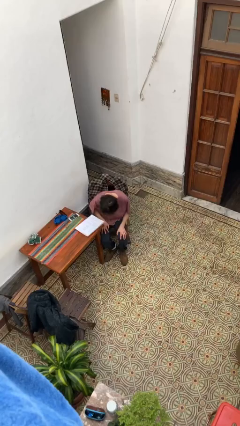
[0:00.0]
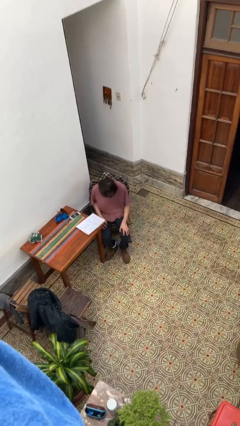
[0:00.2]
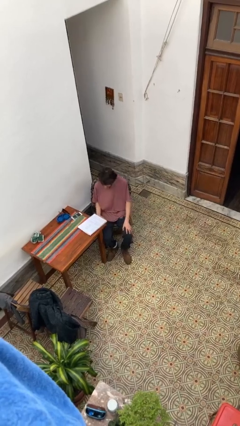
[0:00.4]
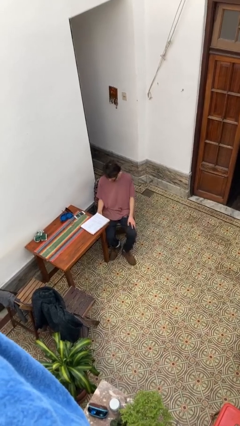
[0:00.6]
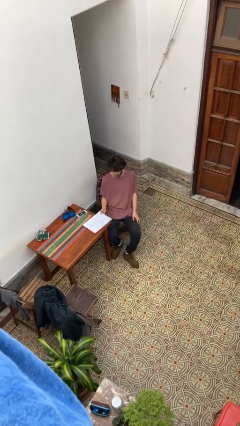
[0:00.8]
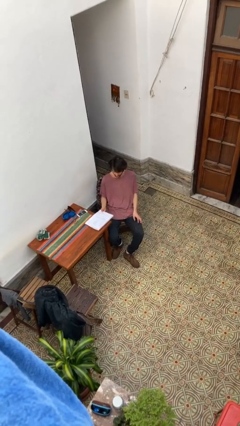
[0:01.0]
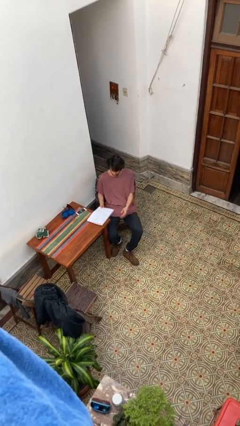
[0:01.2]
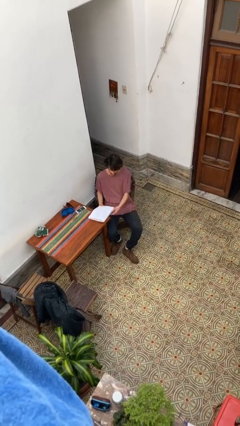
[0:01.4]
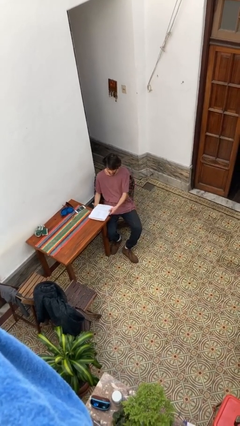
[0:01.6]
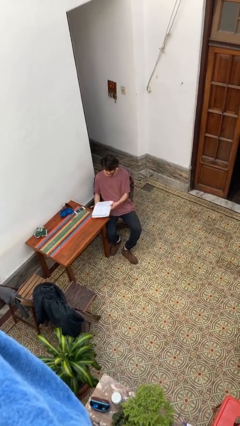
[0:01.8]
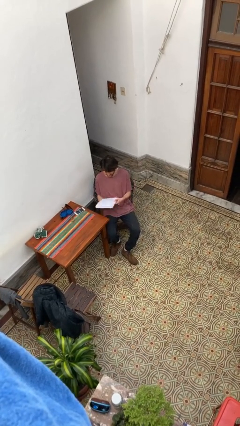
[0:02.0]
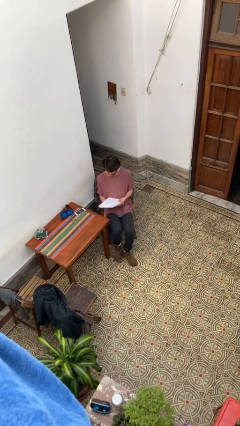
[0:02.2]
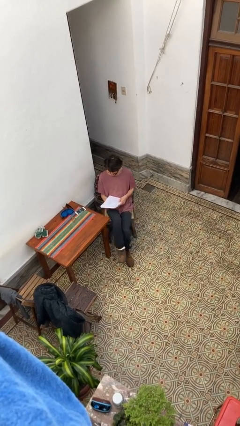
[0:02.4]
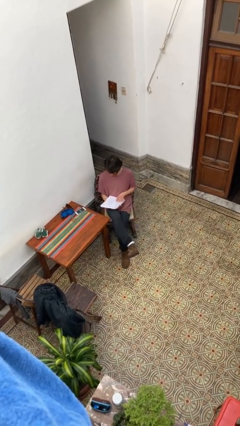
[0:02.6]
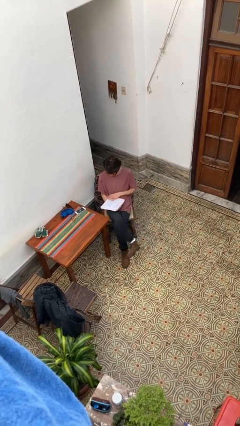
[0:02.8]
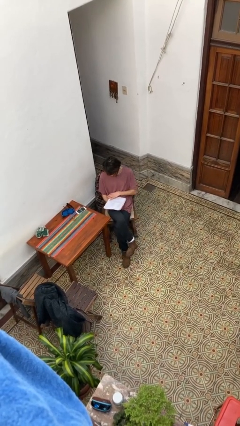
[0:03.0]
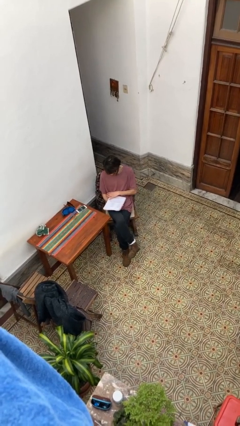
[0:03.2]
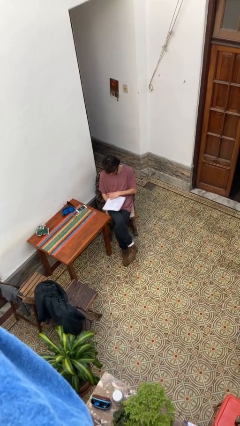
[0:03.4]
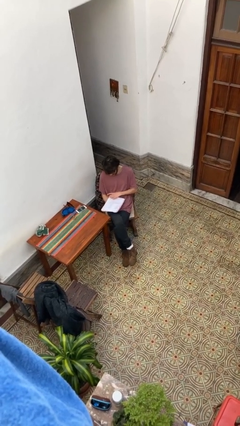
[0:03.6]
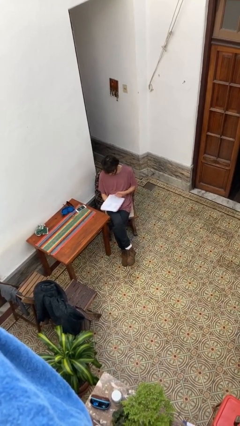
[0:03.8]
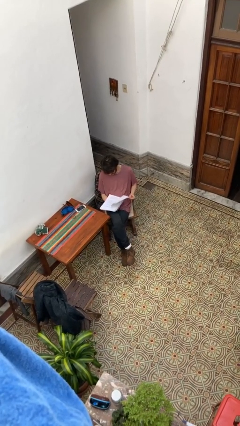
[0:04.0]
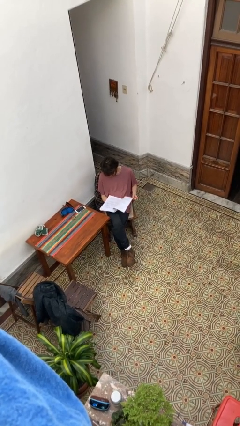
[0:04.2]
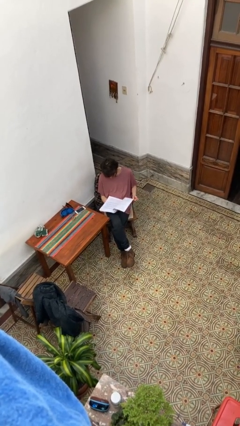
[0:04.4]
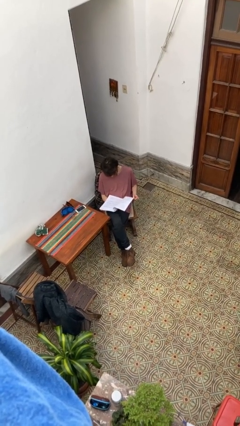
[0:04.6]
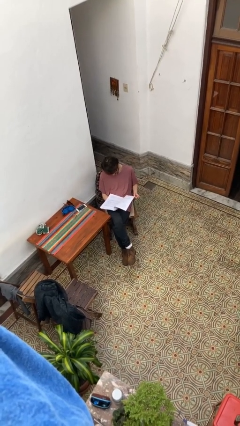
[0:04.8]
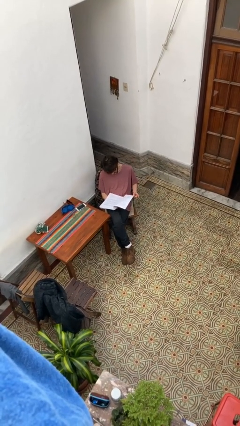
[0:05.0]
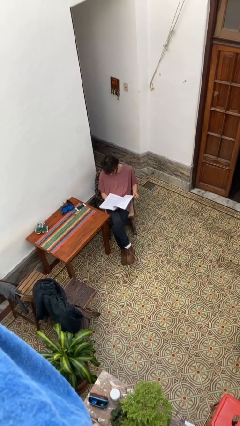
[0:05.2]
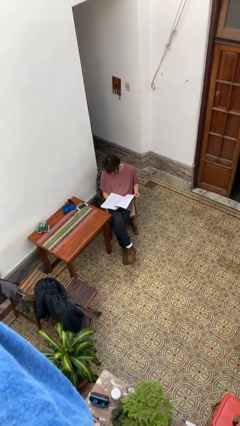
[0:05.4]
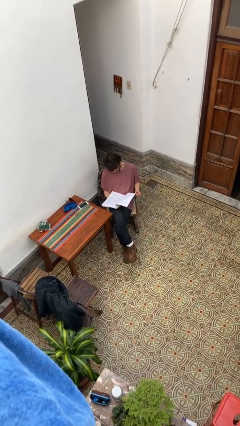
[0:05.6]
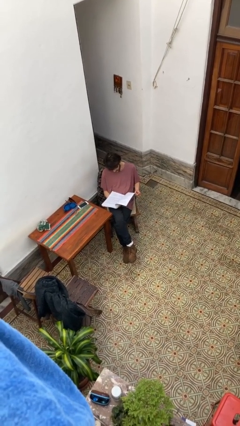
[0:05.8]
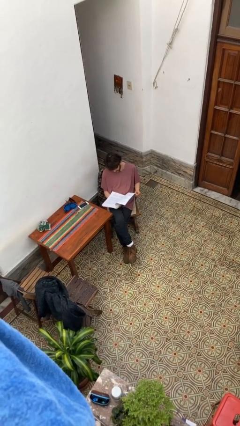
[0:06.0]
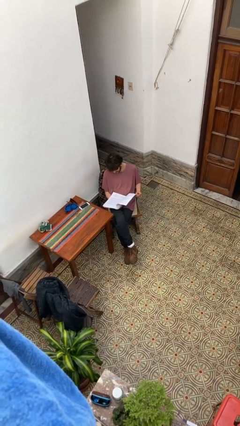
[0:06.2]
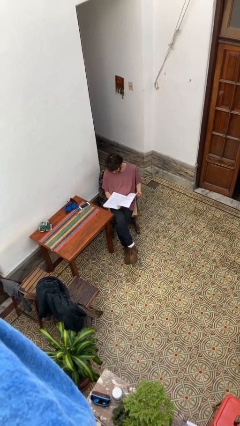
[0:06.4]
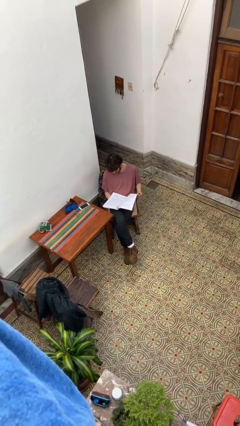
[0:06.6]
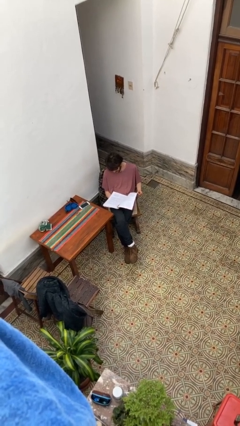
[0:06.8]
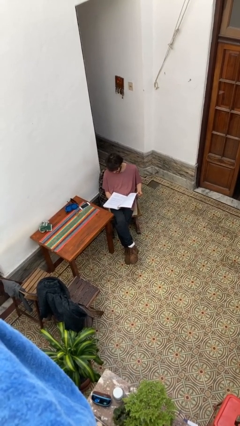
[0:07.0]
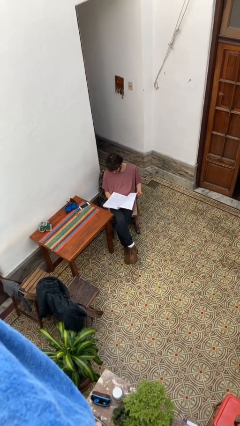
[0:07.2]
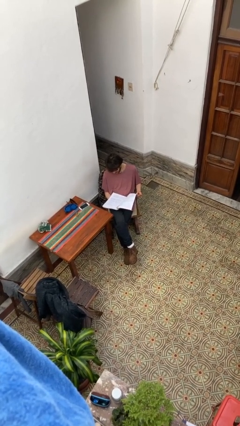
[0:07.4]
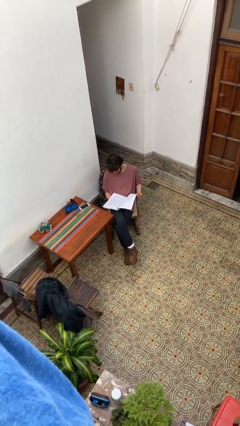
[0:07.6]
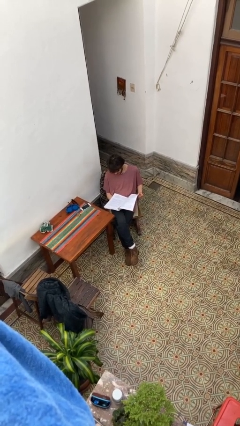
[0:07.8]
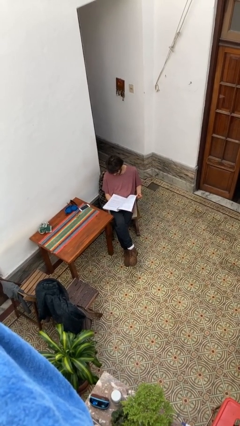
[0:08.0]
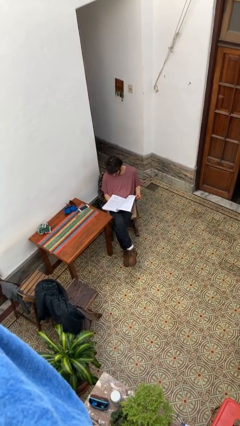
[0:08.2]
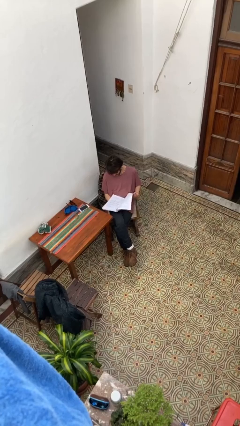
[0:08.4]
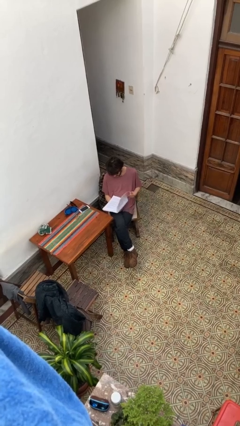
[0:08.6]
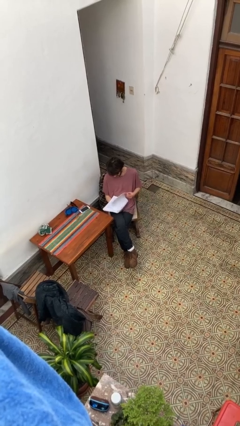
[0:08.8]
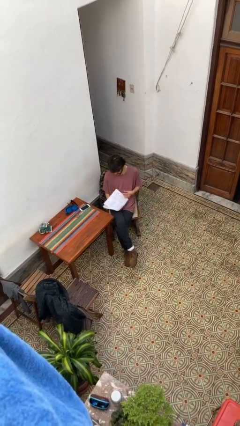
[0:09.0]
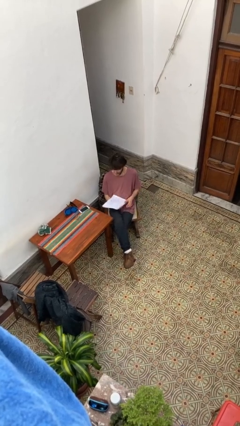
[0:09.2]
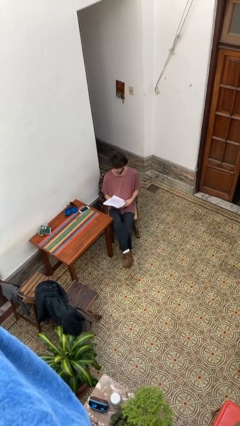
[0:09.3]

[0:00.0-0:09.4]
person reads document

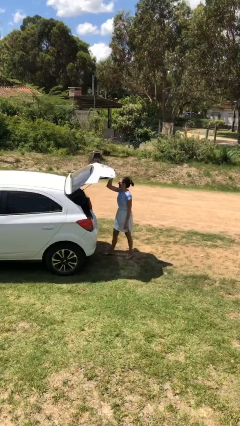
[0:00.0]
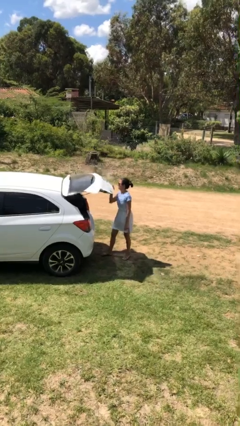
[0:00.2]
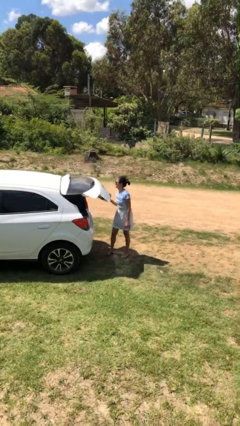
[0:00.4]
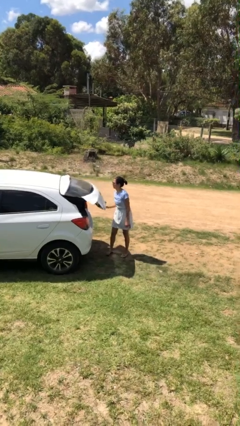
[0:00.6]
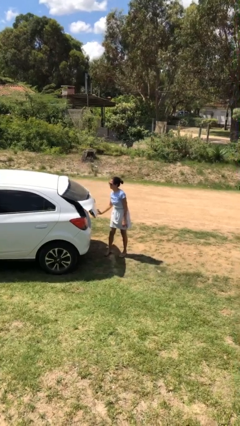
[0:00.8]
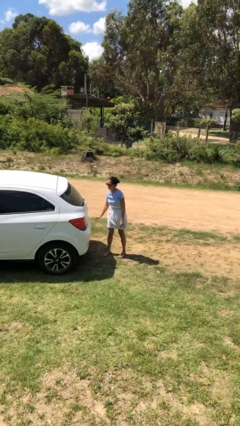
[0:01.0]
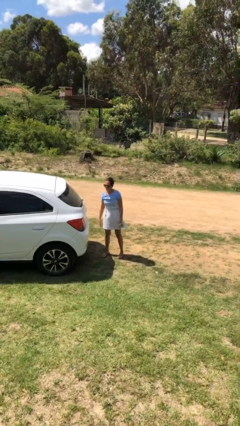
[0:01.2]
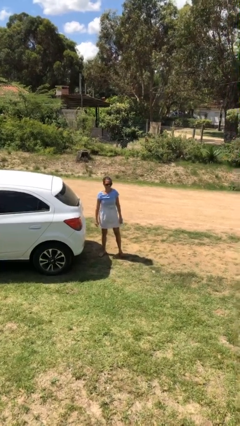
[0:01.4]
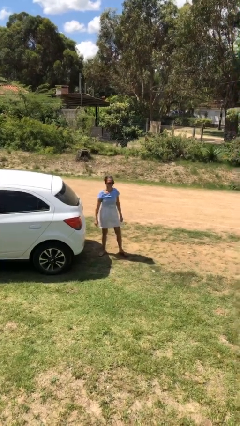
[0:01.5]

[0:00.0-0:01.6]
person closes car trunk

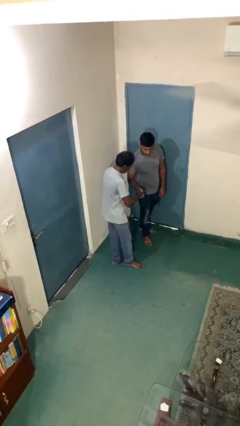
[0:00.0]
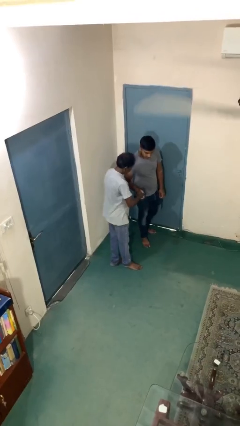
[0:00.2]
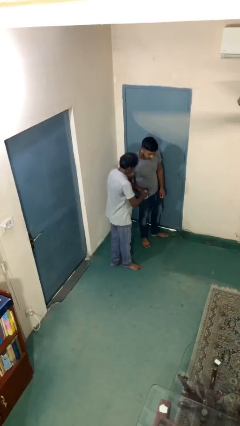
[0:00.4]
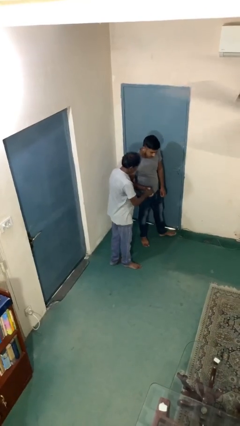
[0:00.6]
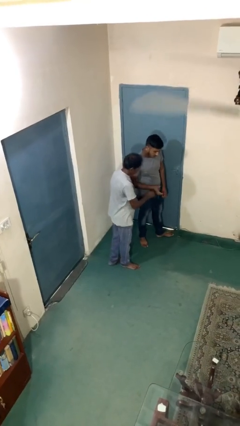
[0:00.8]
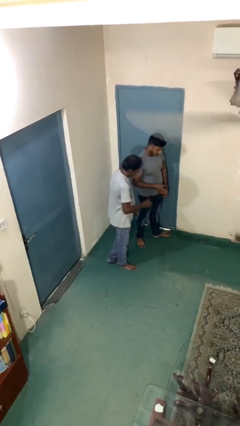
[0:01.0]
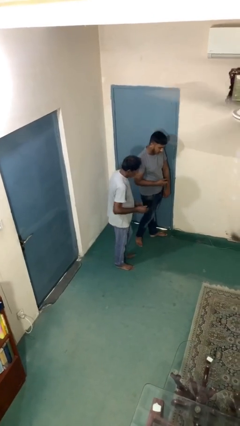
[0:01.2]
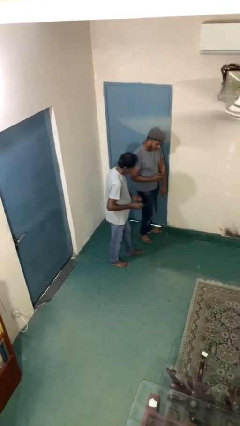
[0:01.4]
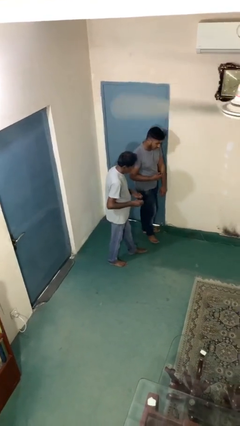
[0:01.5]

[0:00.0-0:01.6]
person shakes hand

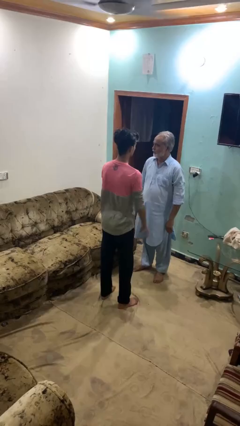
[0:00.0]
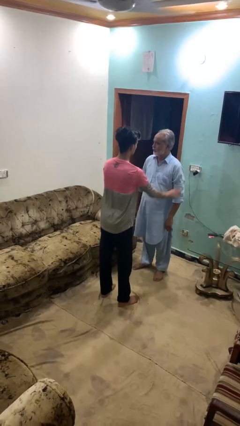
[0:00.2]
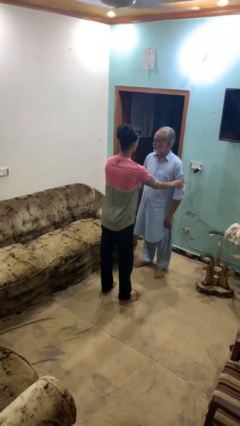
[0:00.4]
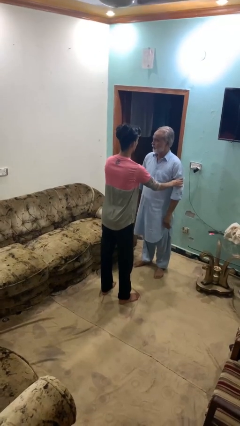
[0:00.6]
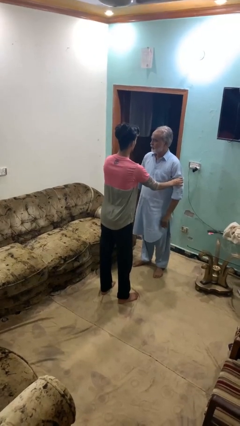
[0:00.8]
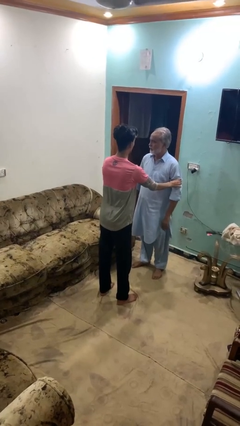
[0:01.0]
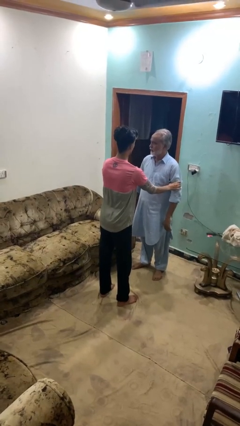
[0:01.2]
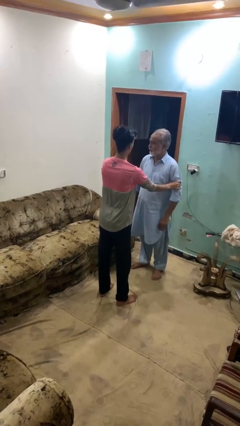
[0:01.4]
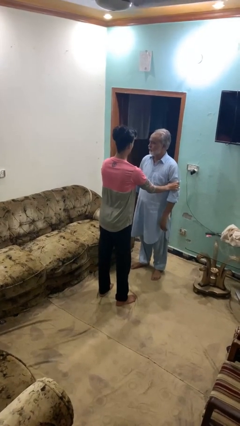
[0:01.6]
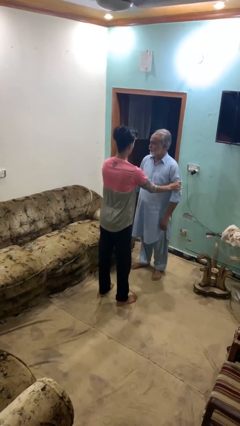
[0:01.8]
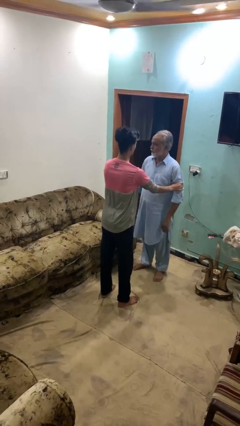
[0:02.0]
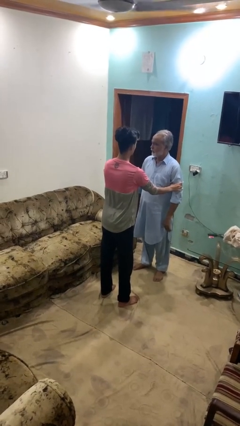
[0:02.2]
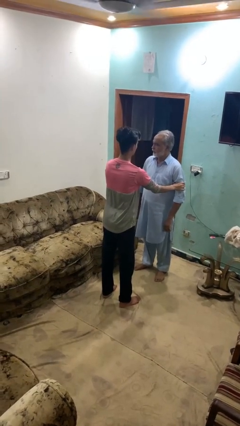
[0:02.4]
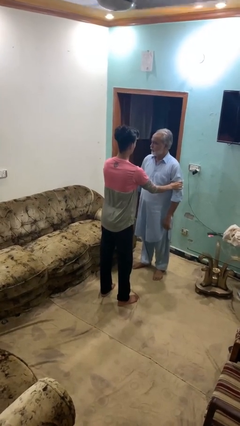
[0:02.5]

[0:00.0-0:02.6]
person grabs person by bicep

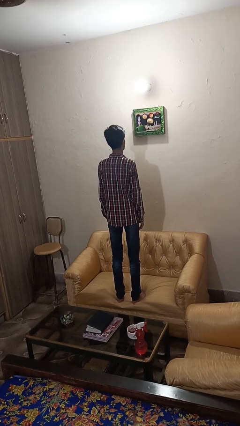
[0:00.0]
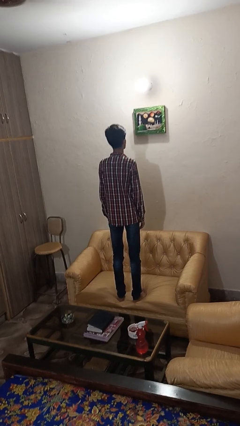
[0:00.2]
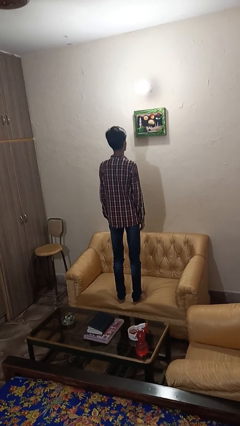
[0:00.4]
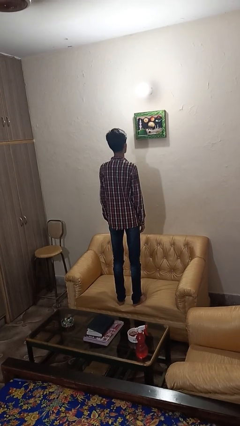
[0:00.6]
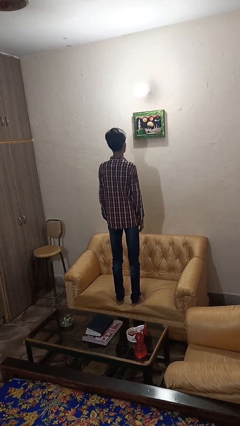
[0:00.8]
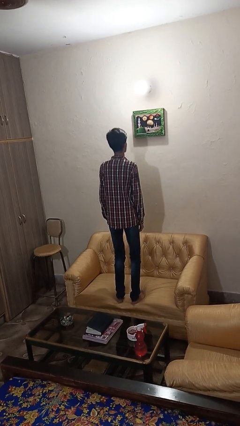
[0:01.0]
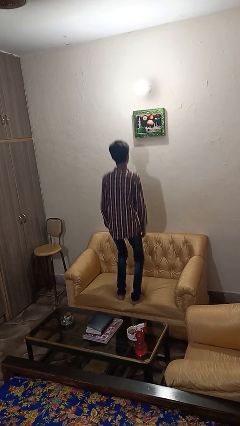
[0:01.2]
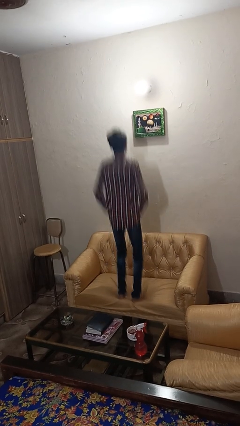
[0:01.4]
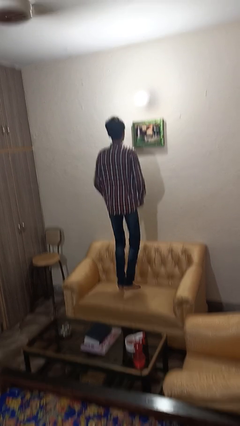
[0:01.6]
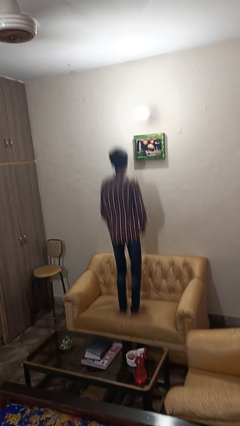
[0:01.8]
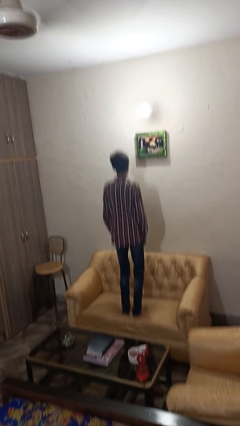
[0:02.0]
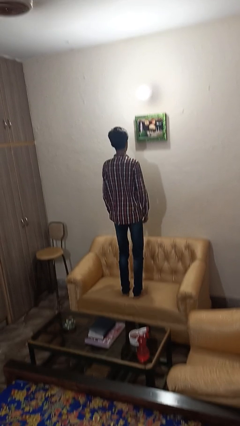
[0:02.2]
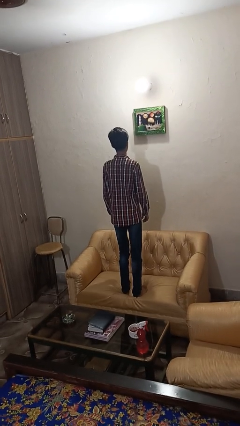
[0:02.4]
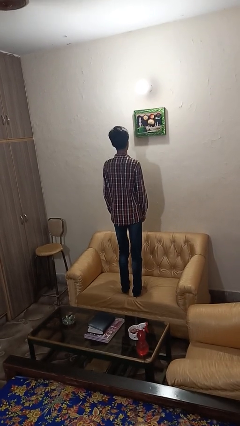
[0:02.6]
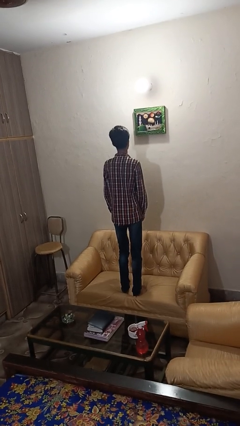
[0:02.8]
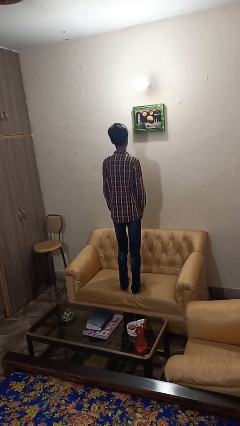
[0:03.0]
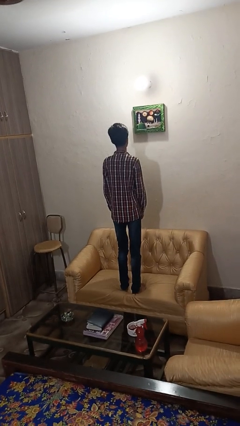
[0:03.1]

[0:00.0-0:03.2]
person jumps on couch
